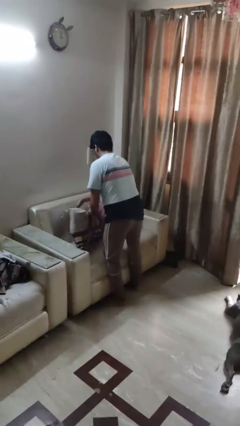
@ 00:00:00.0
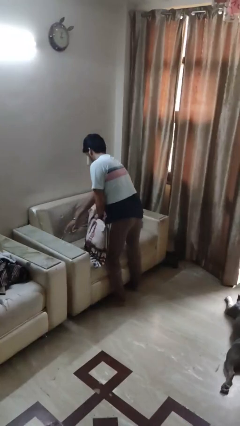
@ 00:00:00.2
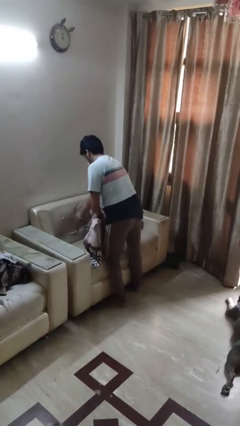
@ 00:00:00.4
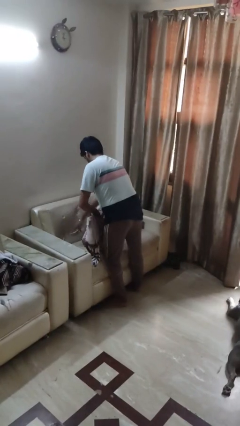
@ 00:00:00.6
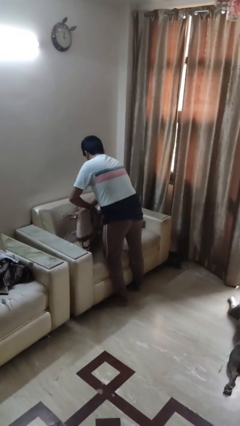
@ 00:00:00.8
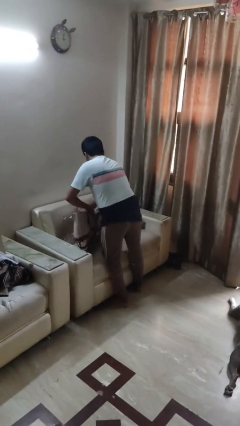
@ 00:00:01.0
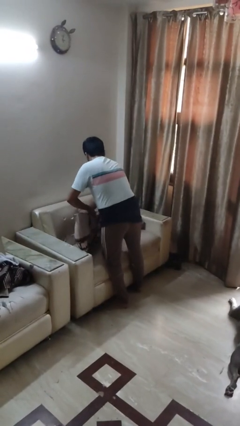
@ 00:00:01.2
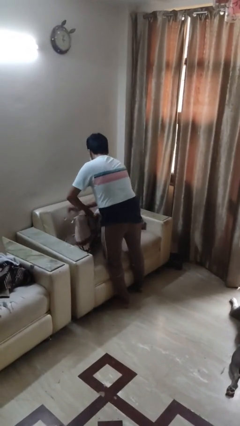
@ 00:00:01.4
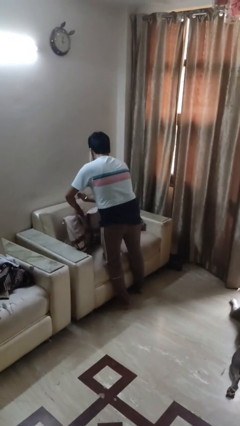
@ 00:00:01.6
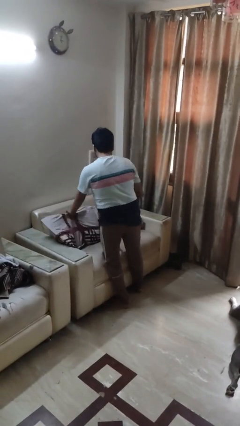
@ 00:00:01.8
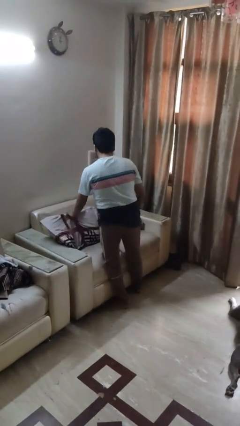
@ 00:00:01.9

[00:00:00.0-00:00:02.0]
person searches in couch

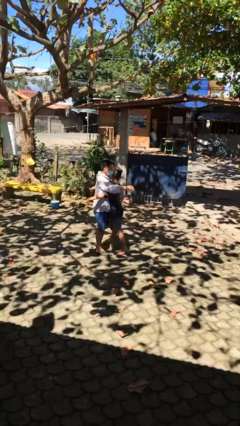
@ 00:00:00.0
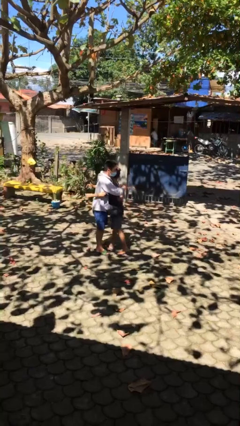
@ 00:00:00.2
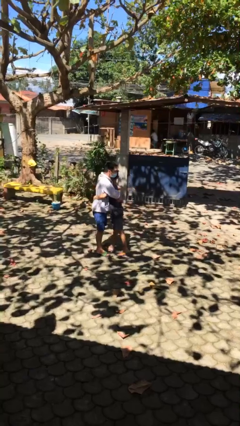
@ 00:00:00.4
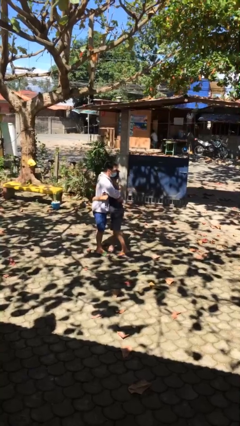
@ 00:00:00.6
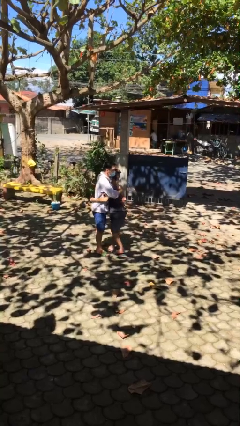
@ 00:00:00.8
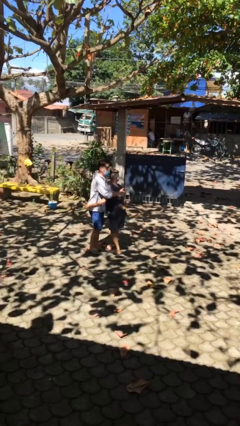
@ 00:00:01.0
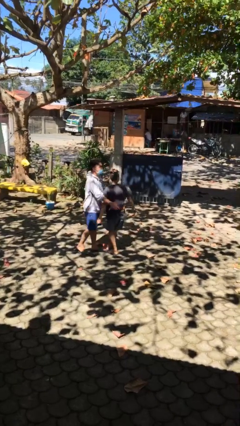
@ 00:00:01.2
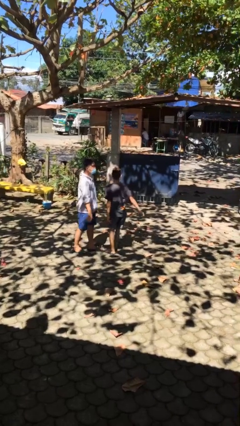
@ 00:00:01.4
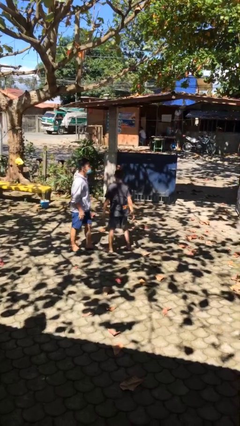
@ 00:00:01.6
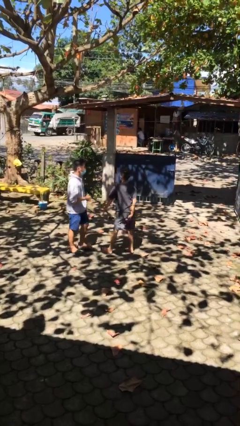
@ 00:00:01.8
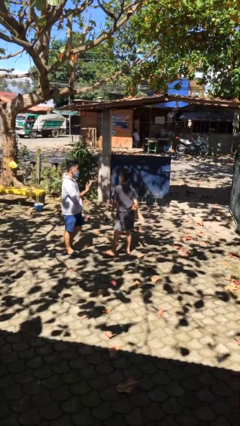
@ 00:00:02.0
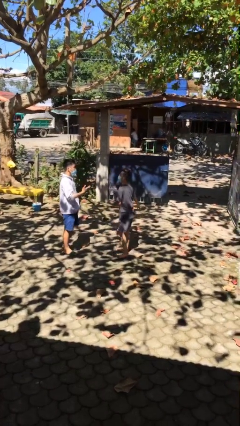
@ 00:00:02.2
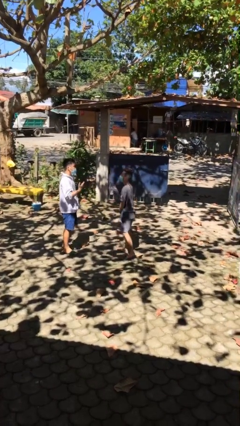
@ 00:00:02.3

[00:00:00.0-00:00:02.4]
person embraces person

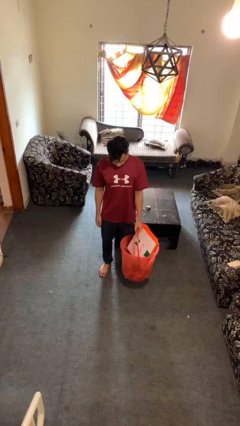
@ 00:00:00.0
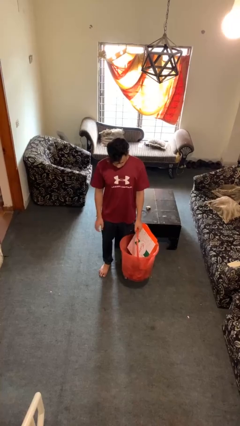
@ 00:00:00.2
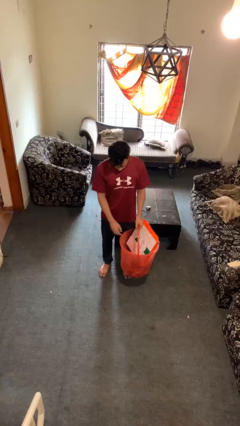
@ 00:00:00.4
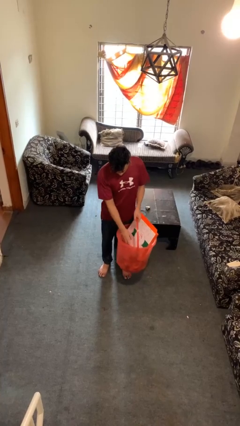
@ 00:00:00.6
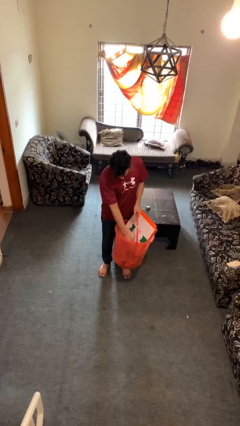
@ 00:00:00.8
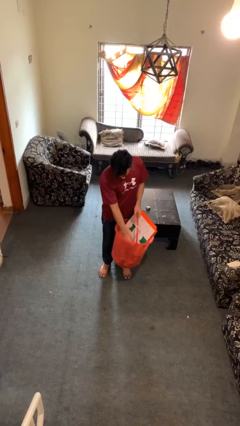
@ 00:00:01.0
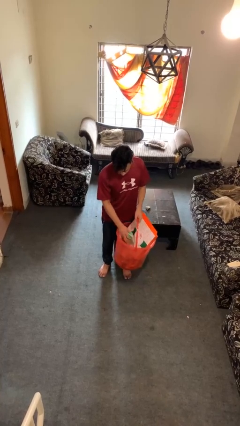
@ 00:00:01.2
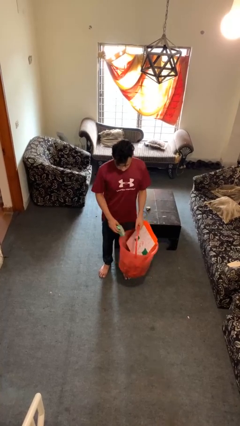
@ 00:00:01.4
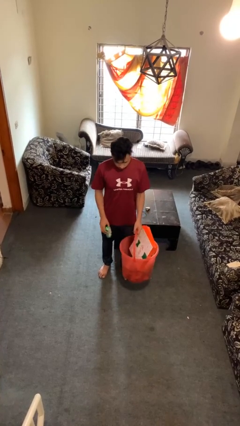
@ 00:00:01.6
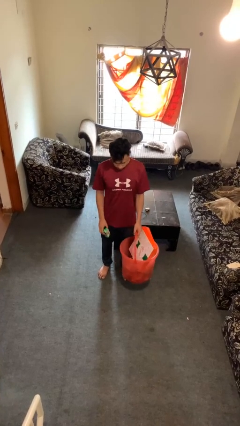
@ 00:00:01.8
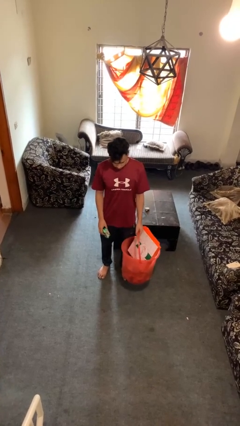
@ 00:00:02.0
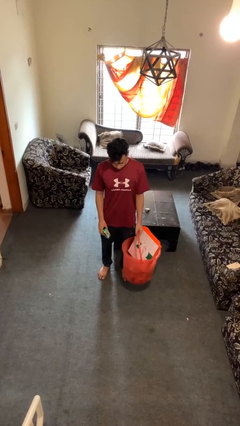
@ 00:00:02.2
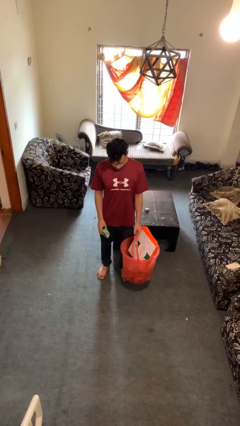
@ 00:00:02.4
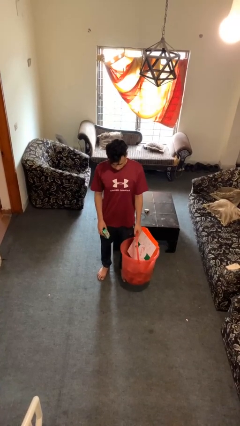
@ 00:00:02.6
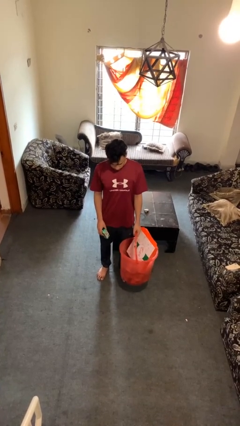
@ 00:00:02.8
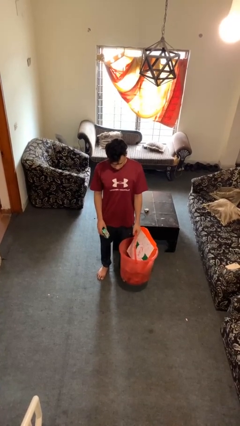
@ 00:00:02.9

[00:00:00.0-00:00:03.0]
person takes object from basket

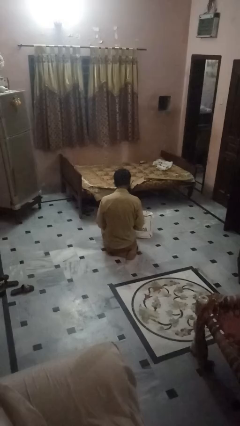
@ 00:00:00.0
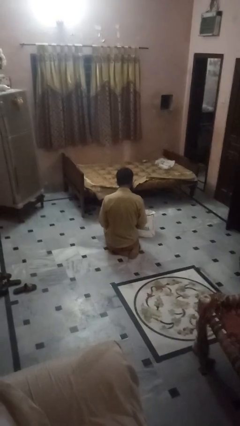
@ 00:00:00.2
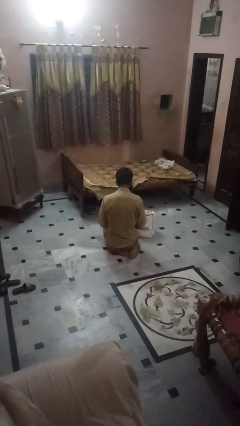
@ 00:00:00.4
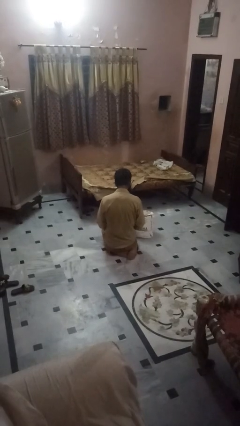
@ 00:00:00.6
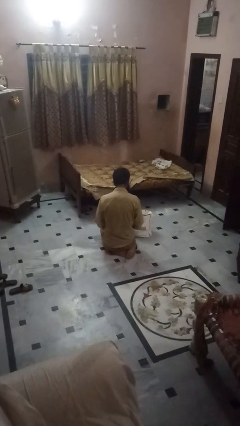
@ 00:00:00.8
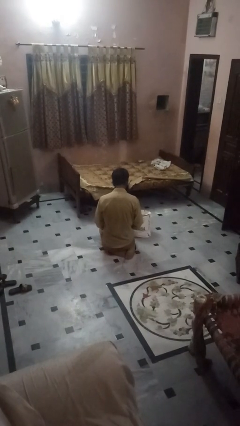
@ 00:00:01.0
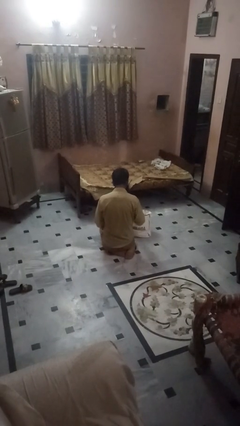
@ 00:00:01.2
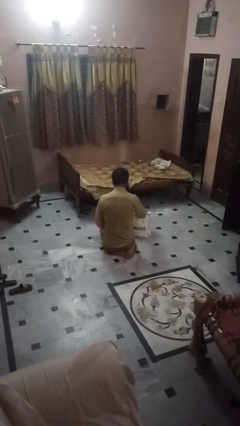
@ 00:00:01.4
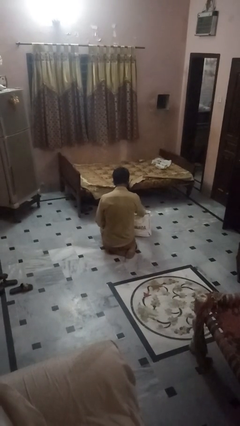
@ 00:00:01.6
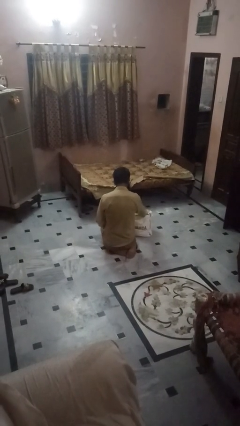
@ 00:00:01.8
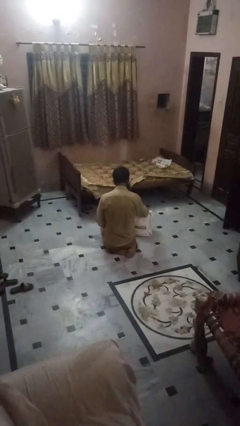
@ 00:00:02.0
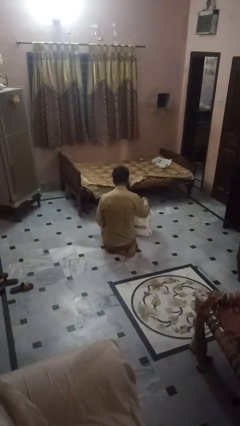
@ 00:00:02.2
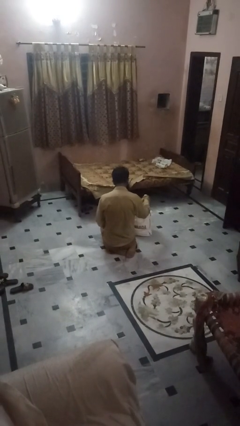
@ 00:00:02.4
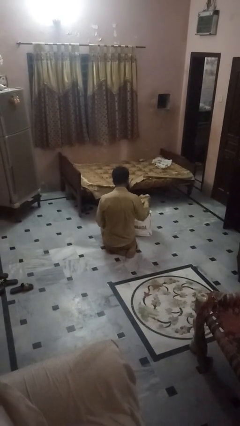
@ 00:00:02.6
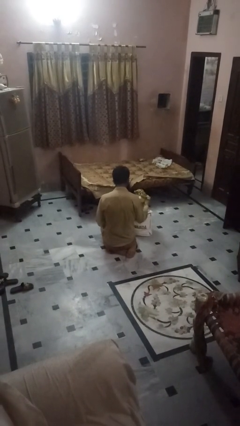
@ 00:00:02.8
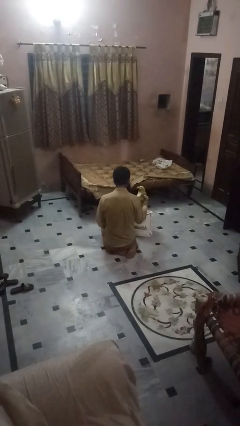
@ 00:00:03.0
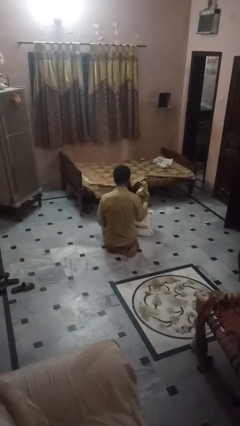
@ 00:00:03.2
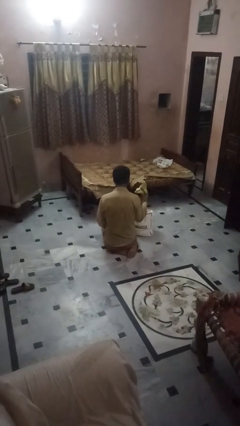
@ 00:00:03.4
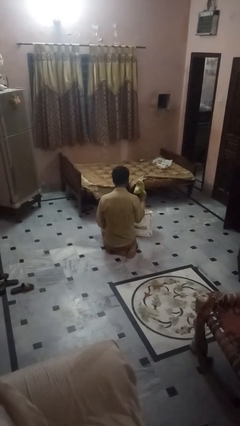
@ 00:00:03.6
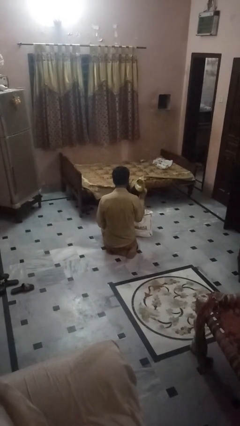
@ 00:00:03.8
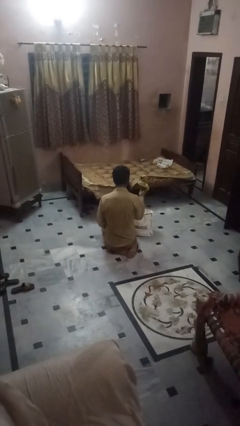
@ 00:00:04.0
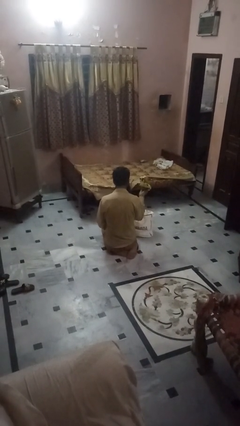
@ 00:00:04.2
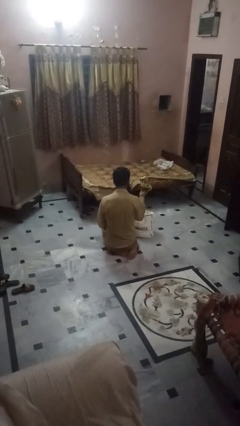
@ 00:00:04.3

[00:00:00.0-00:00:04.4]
person takes object from bag

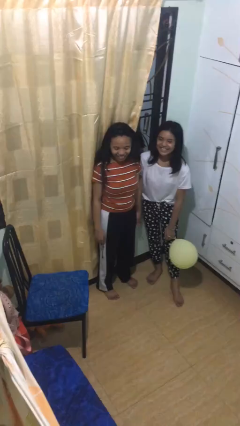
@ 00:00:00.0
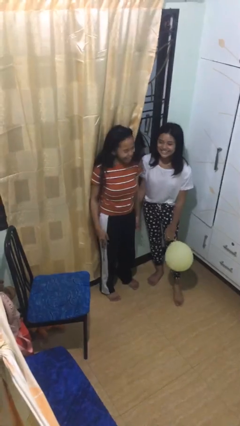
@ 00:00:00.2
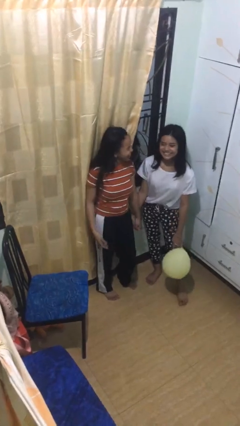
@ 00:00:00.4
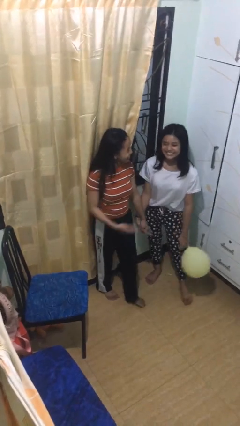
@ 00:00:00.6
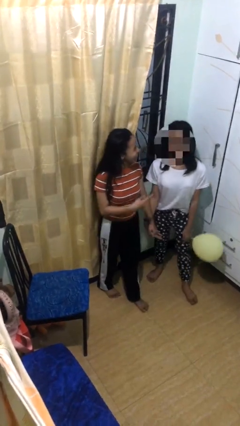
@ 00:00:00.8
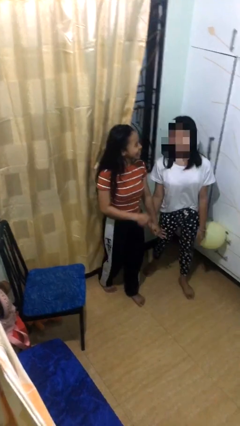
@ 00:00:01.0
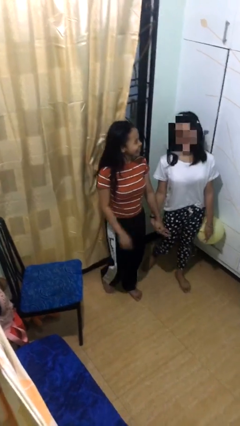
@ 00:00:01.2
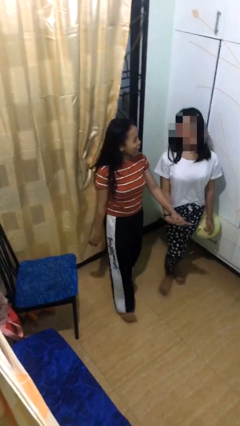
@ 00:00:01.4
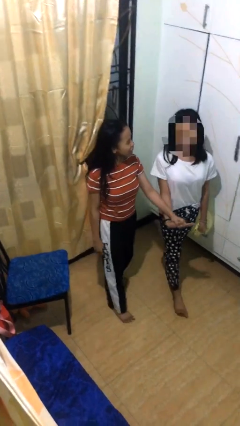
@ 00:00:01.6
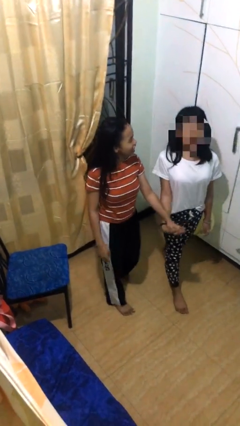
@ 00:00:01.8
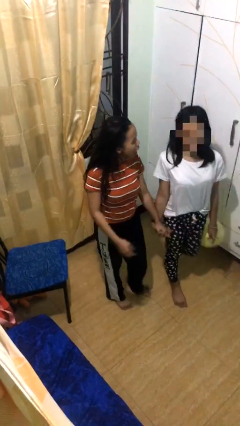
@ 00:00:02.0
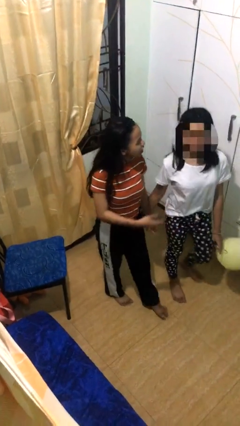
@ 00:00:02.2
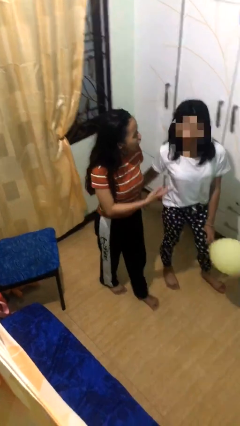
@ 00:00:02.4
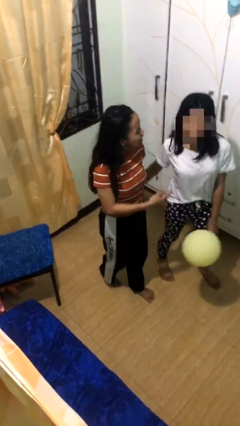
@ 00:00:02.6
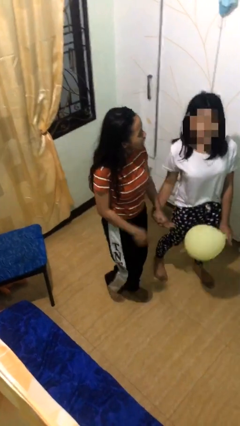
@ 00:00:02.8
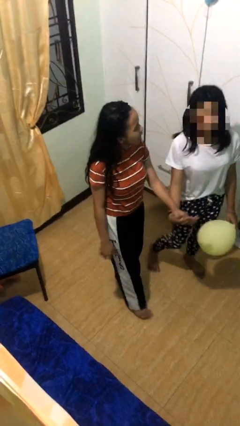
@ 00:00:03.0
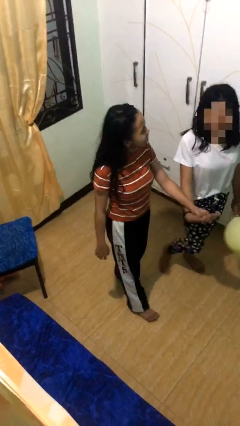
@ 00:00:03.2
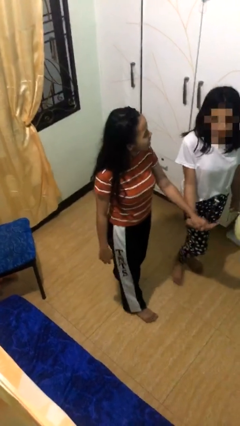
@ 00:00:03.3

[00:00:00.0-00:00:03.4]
person holds hand

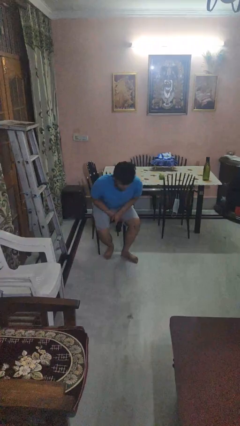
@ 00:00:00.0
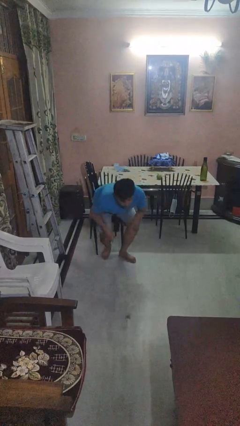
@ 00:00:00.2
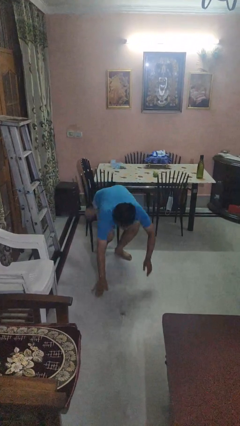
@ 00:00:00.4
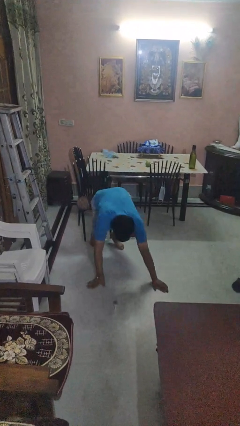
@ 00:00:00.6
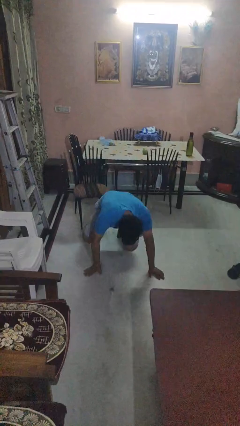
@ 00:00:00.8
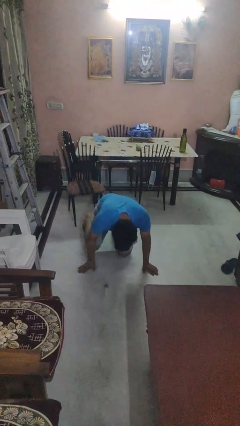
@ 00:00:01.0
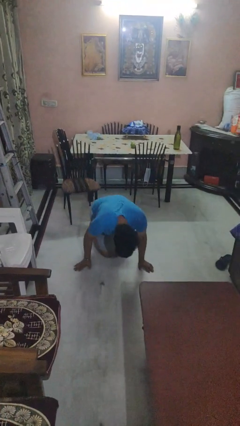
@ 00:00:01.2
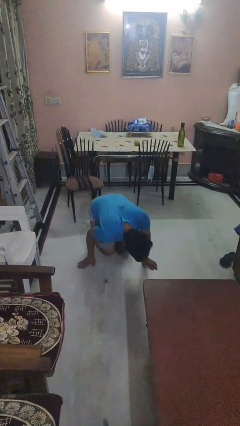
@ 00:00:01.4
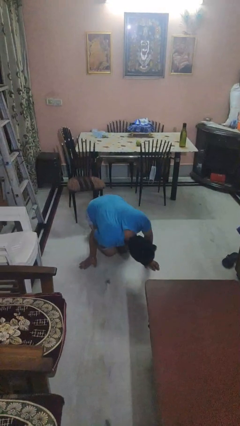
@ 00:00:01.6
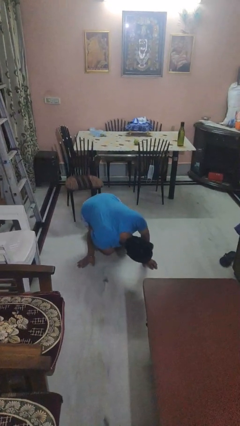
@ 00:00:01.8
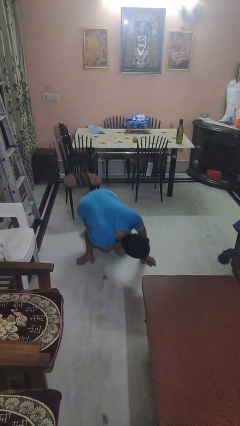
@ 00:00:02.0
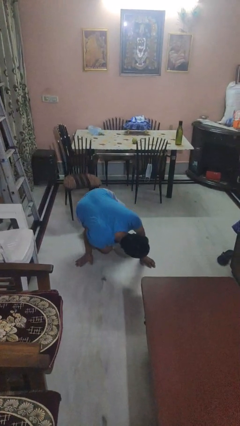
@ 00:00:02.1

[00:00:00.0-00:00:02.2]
person falls while standing
